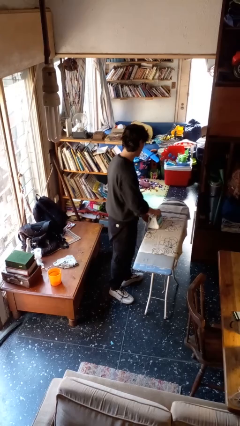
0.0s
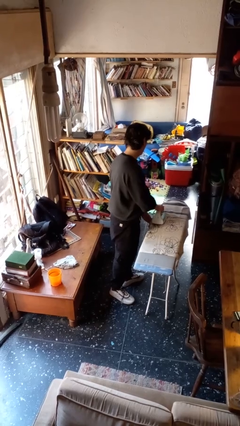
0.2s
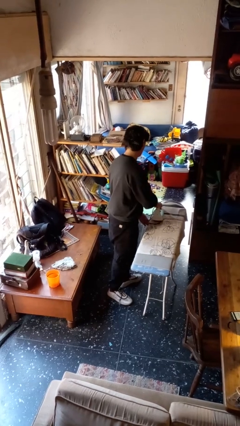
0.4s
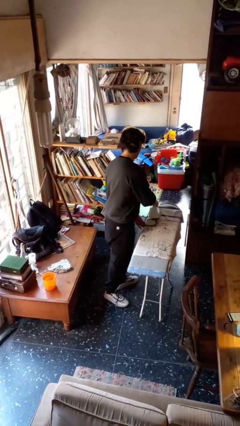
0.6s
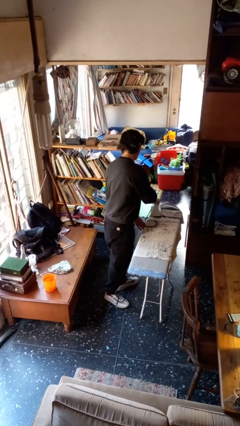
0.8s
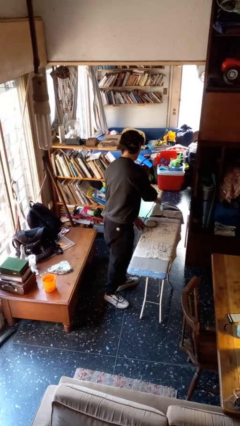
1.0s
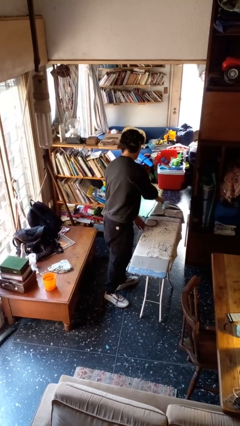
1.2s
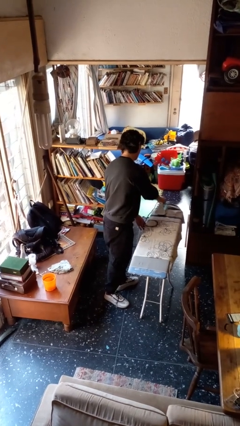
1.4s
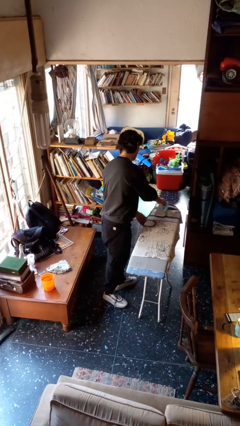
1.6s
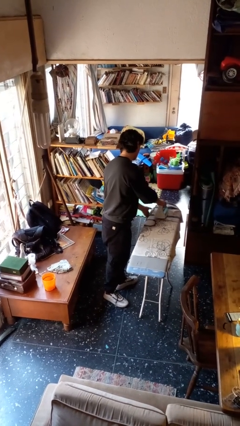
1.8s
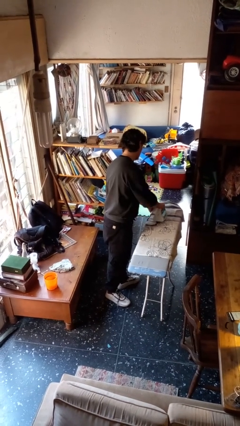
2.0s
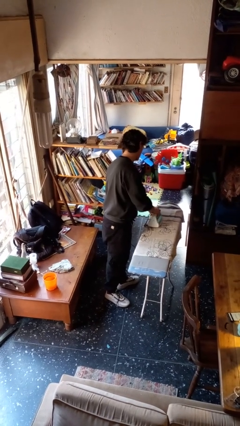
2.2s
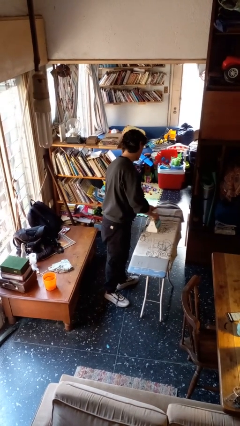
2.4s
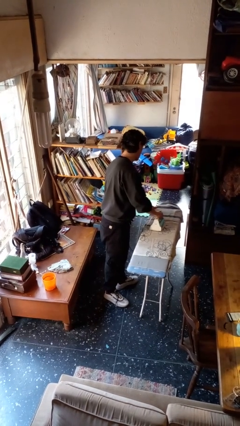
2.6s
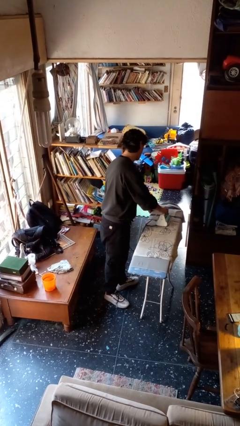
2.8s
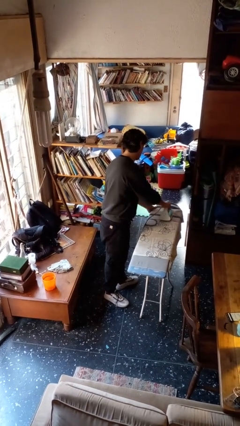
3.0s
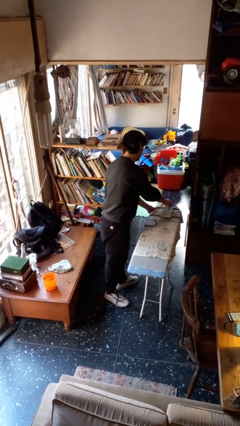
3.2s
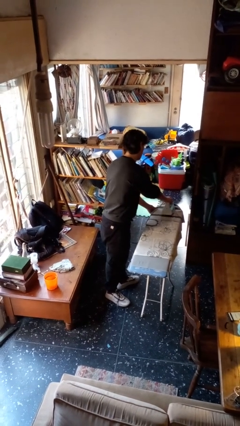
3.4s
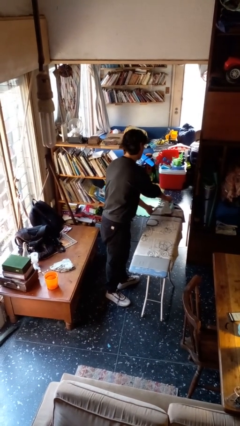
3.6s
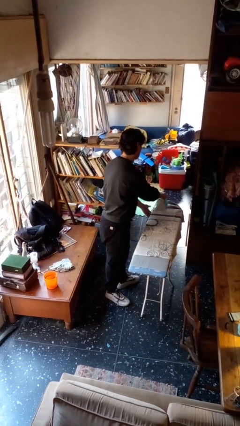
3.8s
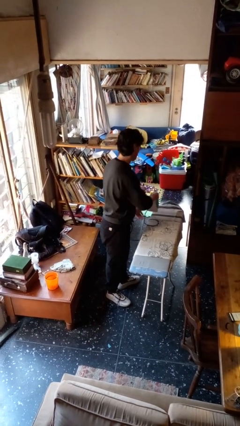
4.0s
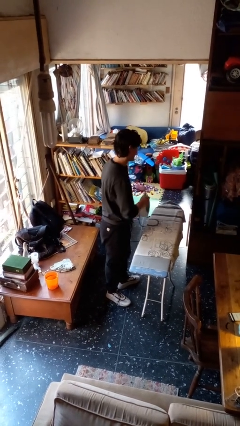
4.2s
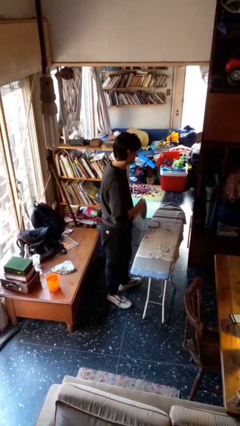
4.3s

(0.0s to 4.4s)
person irons clothes

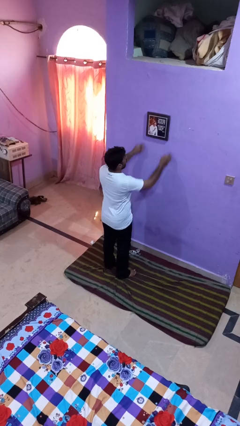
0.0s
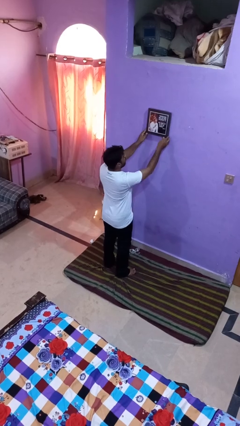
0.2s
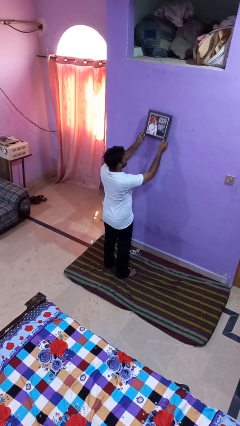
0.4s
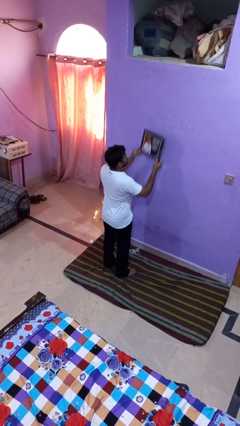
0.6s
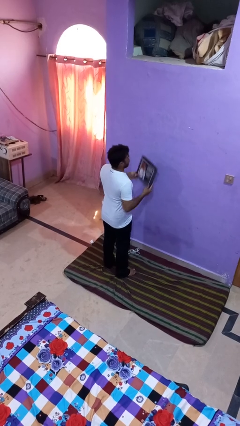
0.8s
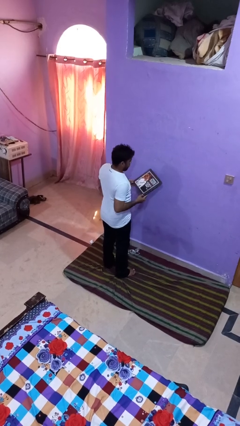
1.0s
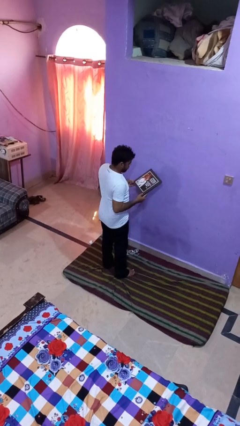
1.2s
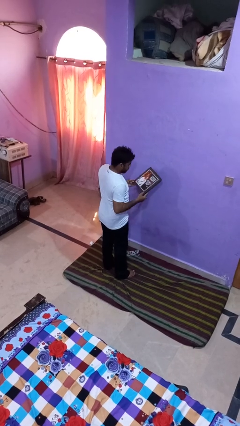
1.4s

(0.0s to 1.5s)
person puts up picture frame

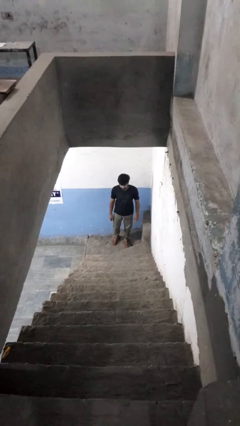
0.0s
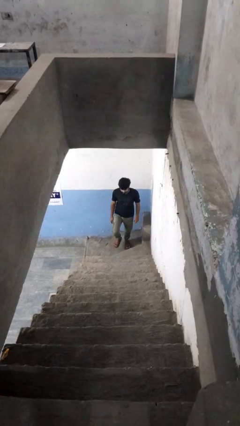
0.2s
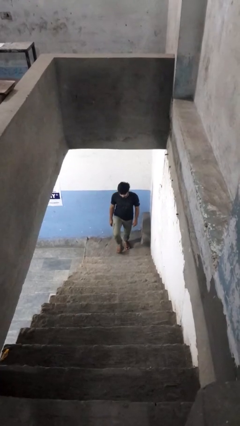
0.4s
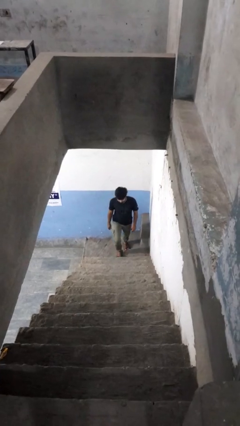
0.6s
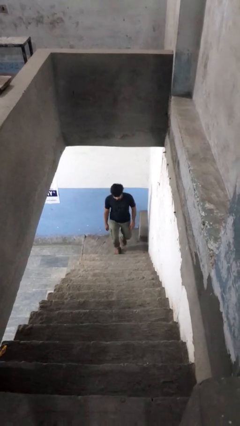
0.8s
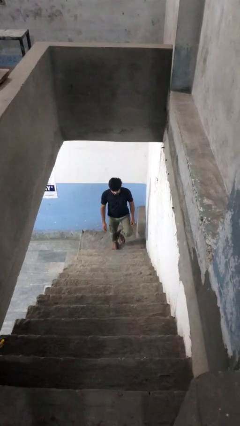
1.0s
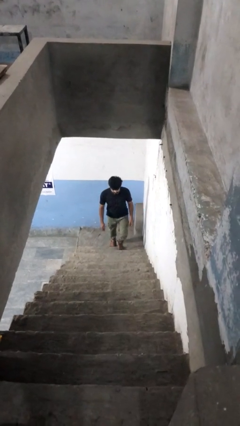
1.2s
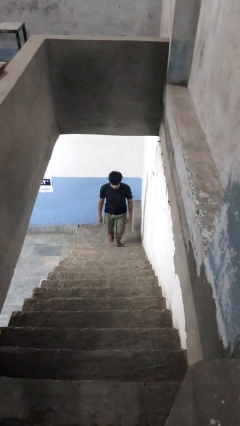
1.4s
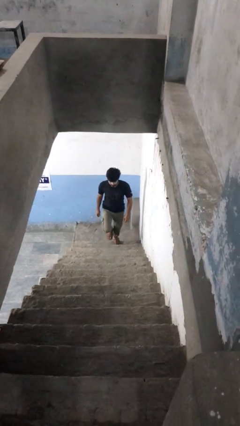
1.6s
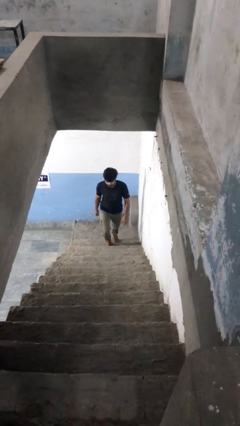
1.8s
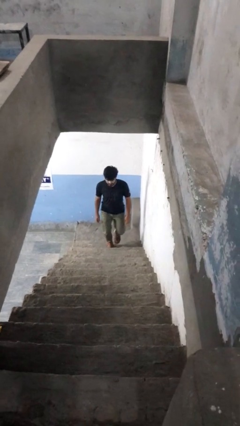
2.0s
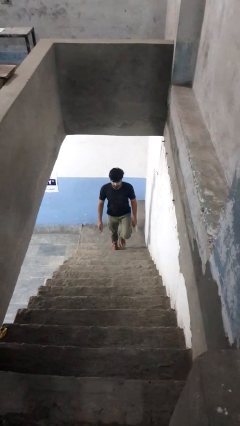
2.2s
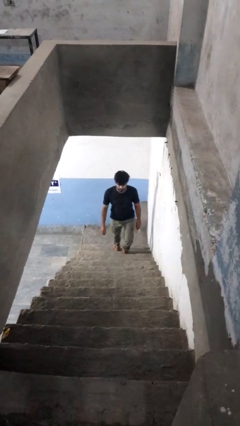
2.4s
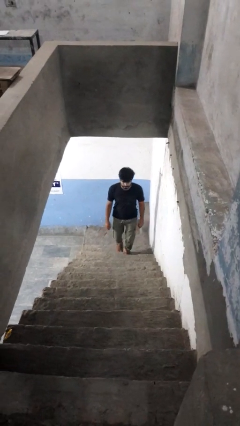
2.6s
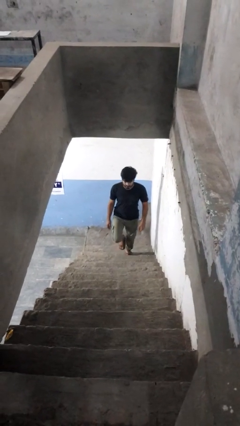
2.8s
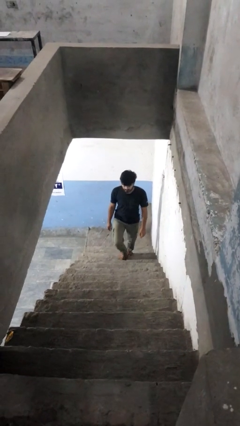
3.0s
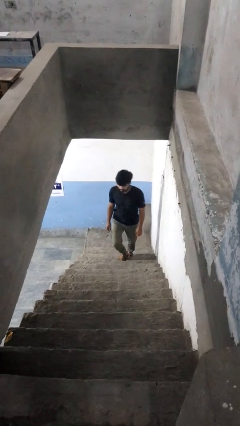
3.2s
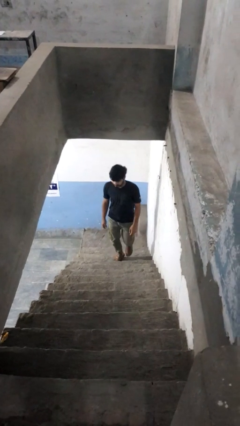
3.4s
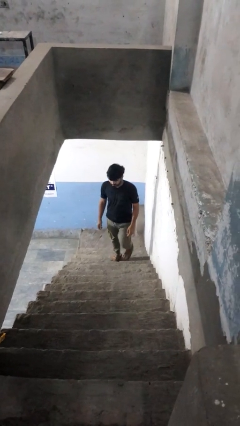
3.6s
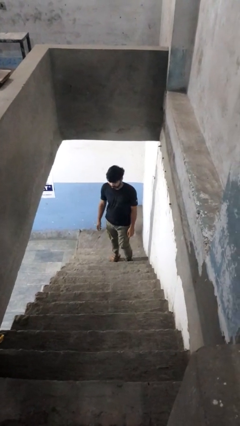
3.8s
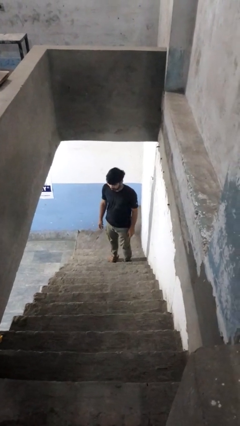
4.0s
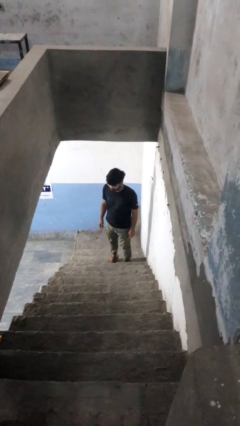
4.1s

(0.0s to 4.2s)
person climbs up stairs

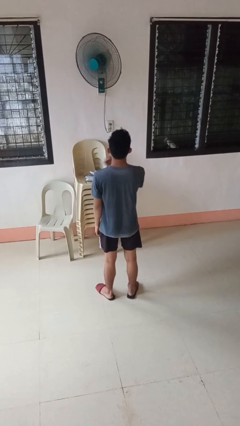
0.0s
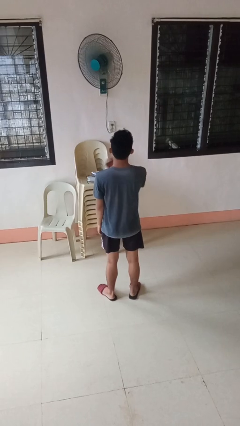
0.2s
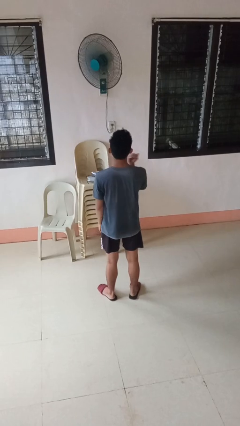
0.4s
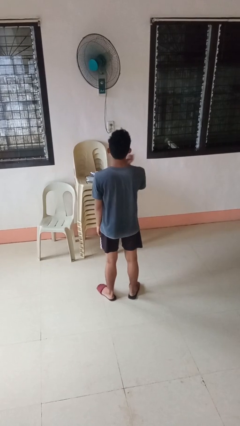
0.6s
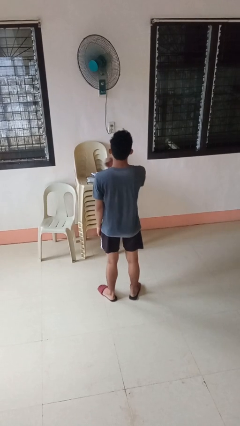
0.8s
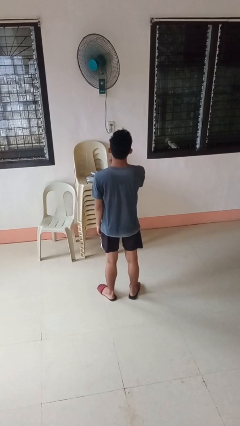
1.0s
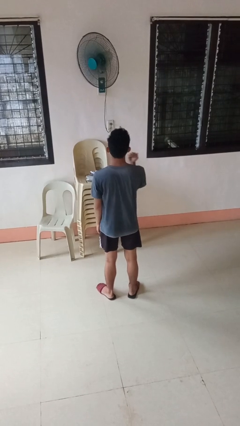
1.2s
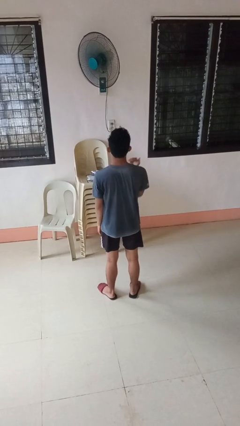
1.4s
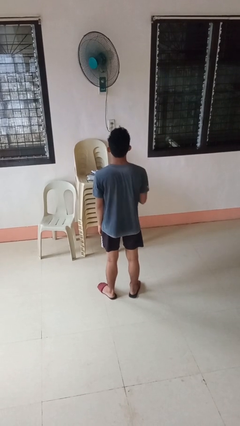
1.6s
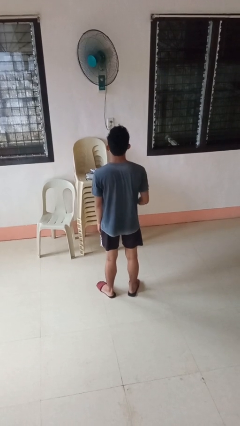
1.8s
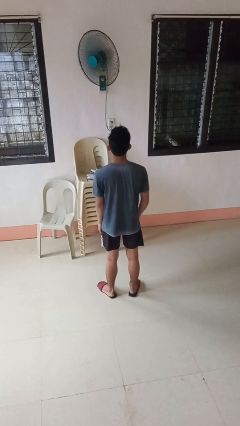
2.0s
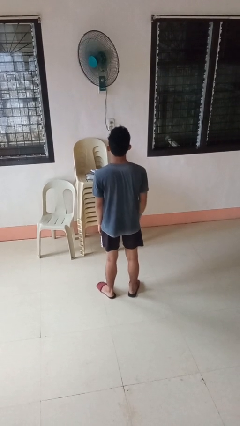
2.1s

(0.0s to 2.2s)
person gestures cut

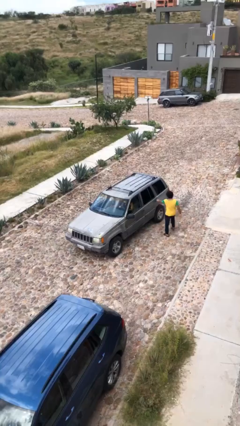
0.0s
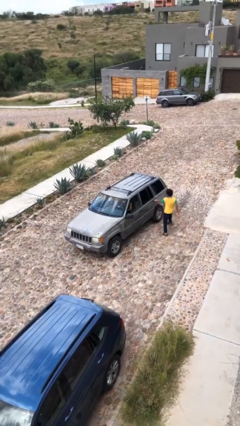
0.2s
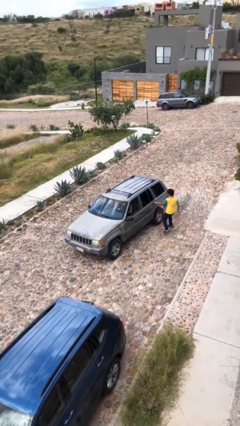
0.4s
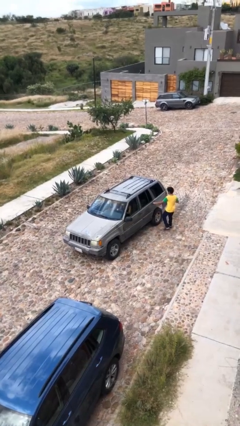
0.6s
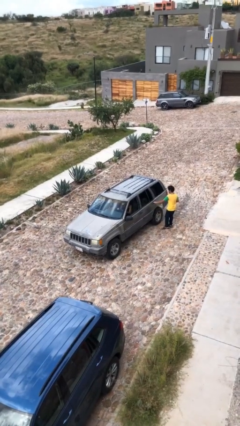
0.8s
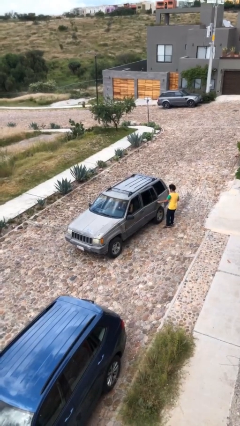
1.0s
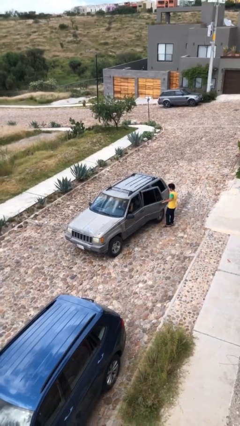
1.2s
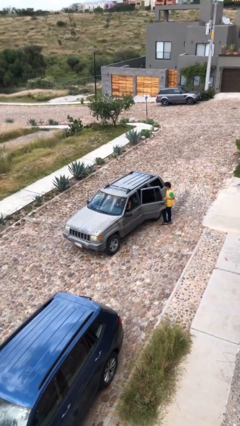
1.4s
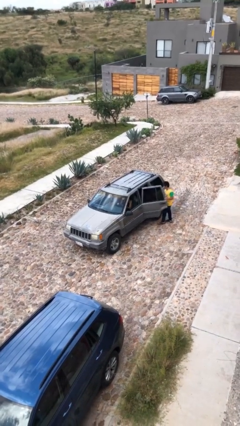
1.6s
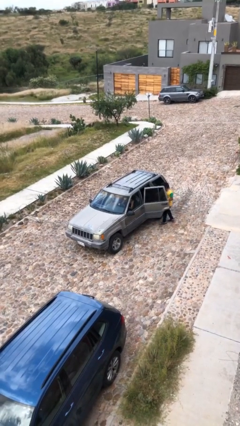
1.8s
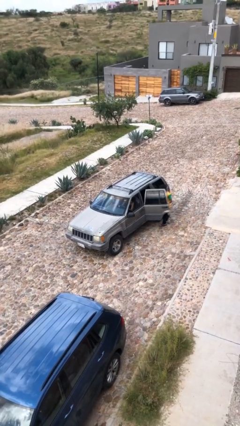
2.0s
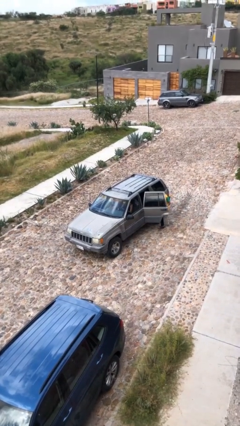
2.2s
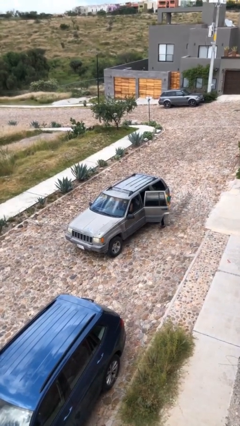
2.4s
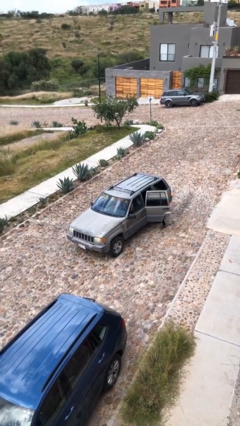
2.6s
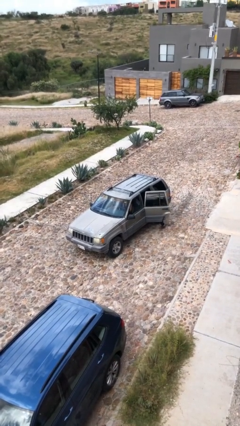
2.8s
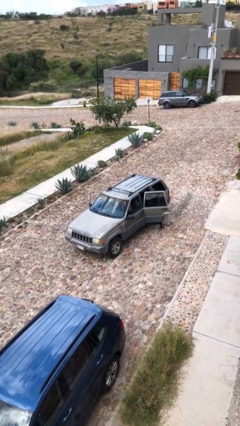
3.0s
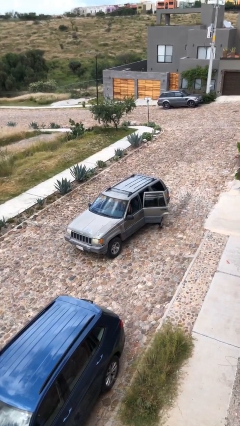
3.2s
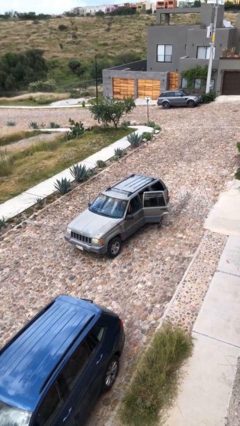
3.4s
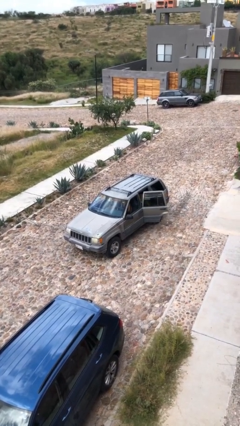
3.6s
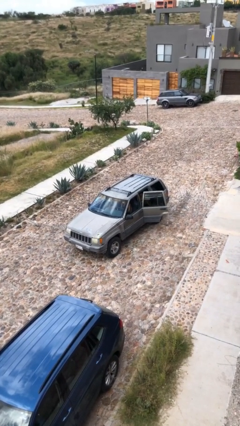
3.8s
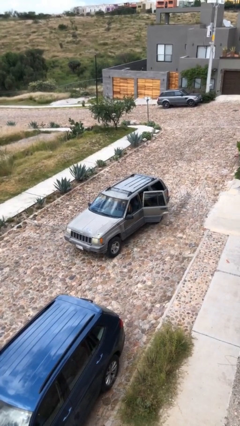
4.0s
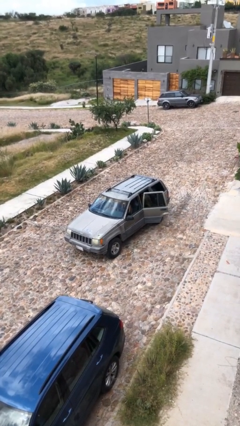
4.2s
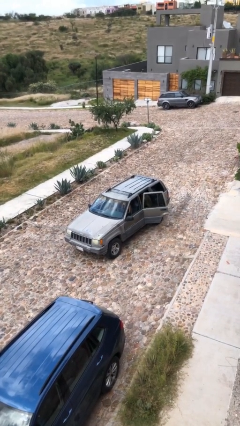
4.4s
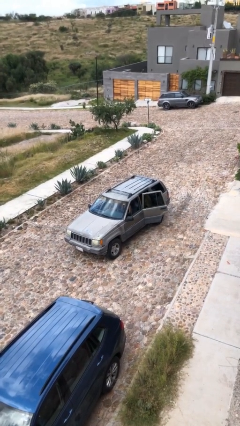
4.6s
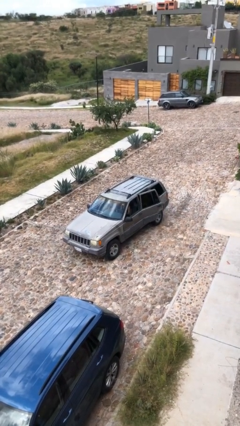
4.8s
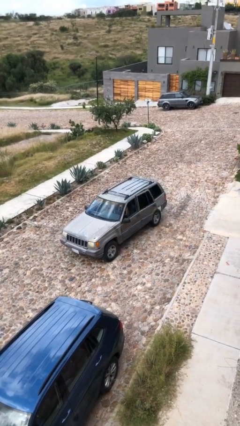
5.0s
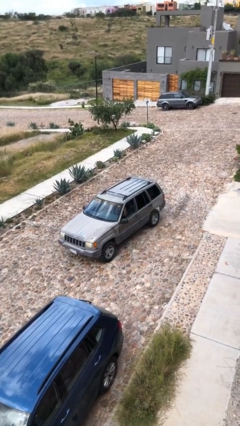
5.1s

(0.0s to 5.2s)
car picks up person

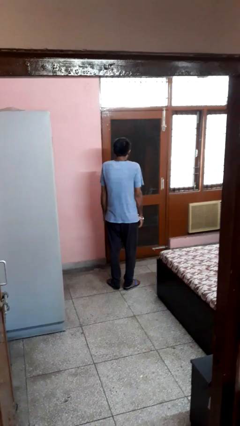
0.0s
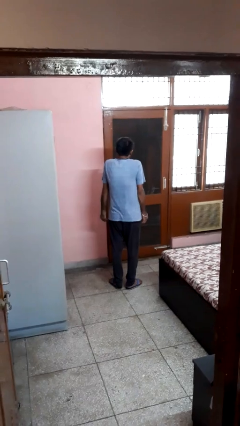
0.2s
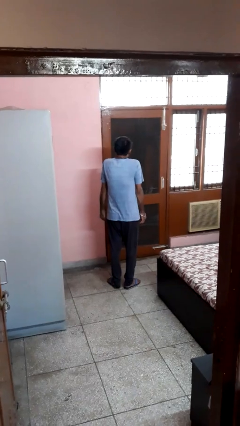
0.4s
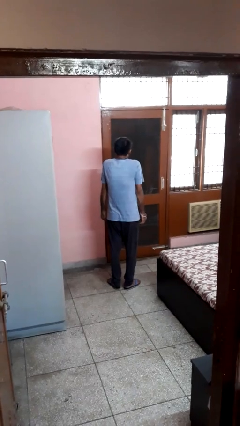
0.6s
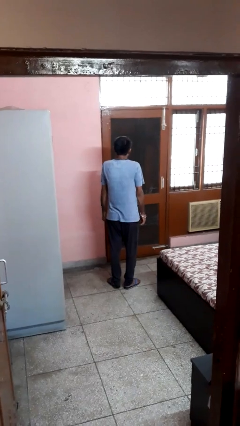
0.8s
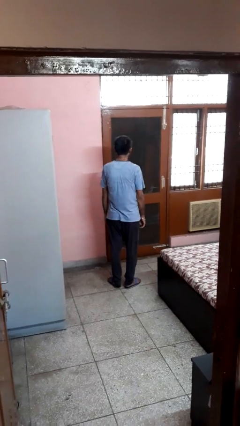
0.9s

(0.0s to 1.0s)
person shrugs
